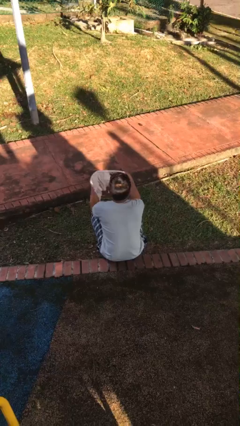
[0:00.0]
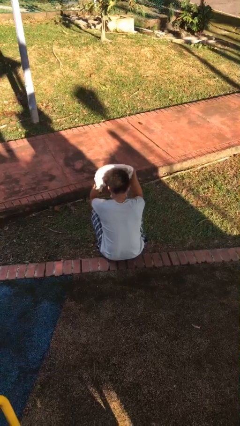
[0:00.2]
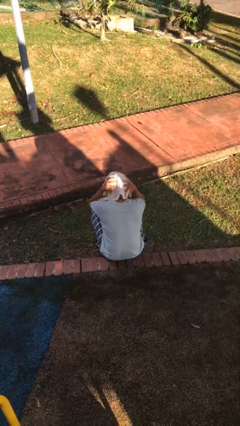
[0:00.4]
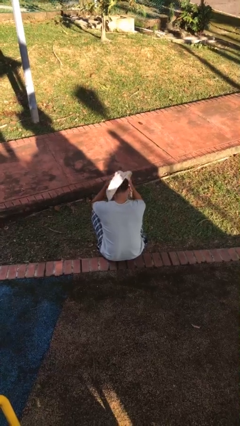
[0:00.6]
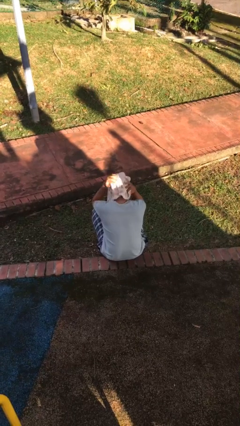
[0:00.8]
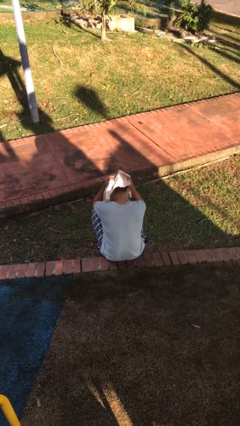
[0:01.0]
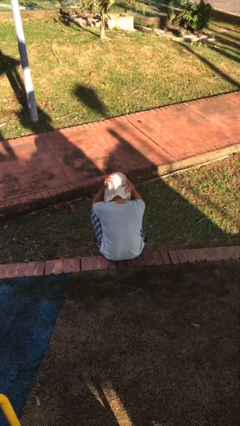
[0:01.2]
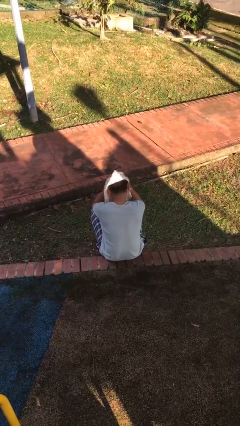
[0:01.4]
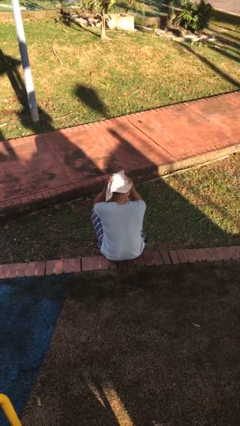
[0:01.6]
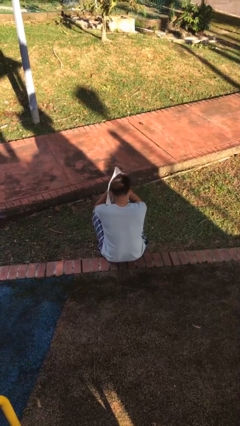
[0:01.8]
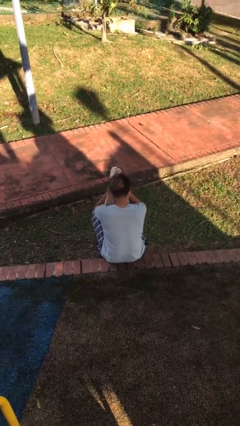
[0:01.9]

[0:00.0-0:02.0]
person dries hair with towel

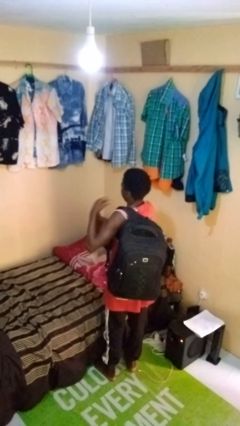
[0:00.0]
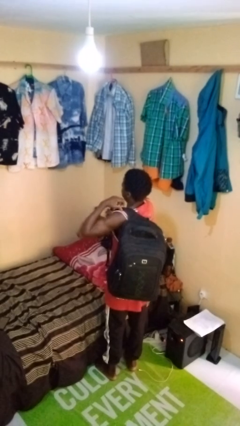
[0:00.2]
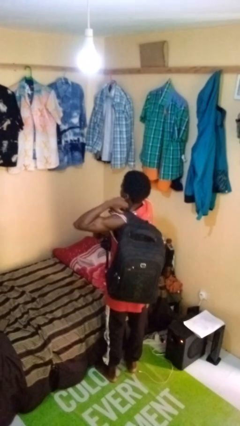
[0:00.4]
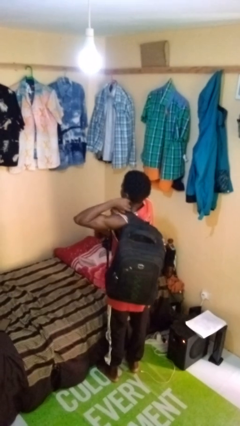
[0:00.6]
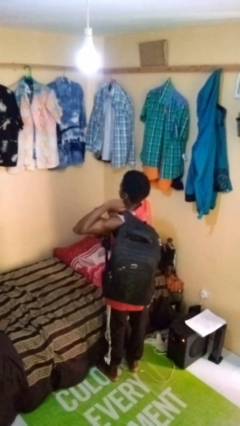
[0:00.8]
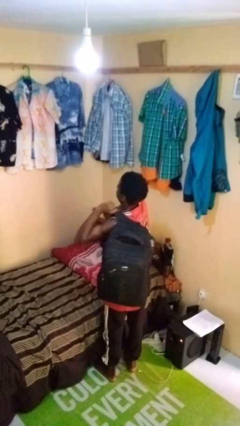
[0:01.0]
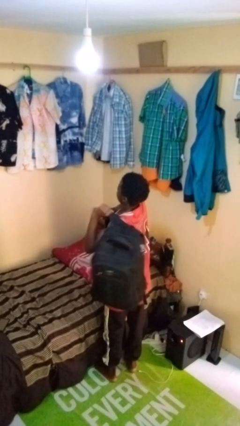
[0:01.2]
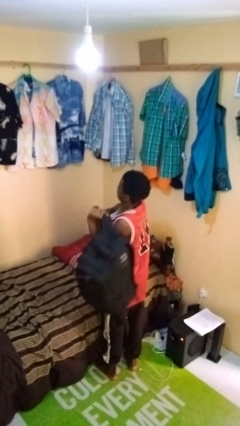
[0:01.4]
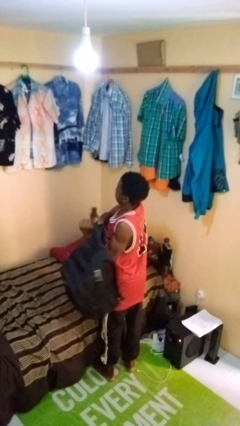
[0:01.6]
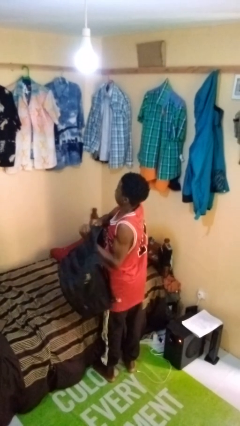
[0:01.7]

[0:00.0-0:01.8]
person takes off backpack

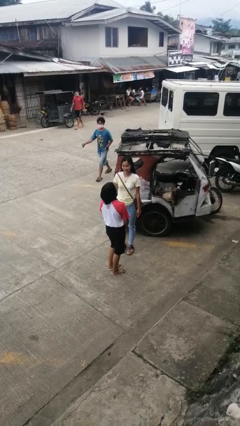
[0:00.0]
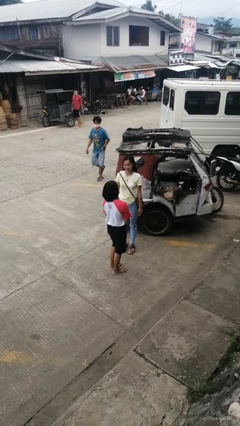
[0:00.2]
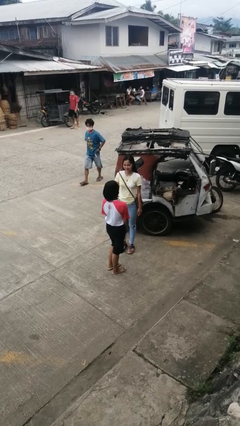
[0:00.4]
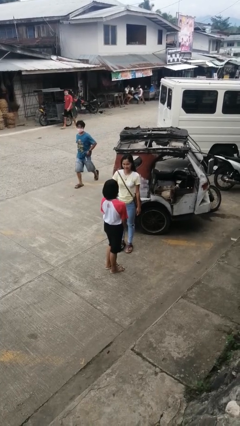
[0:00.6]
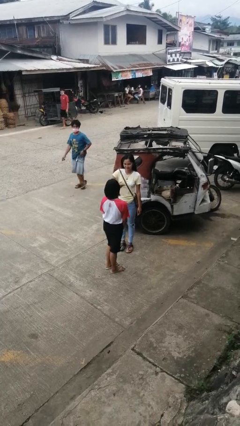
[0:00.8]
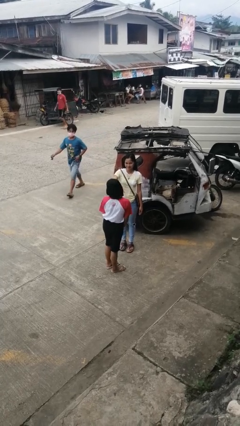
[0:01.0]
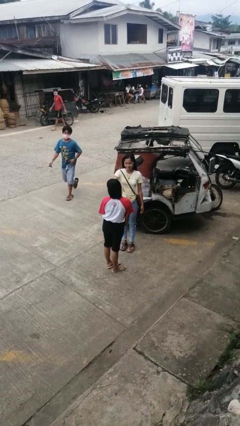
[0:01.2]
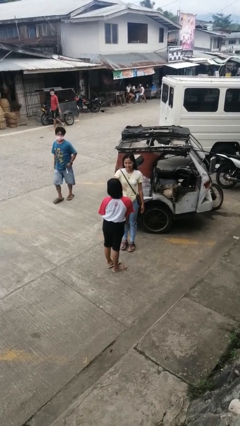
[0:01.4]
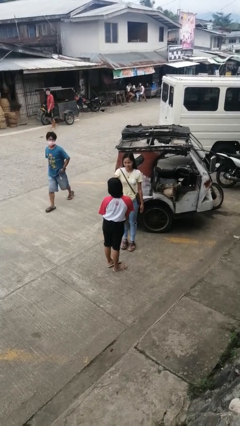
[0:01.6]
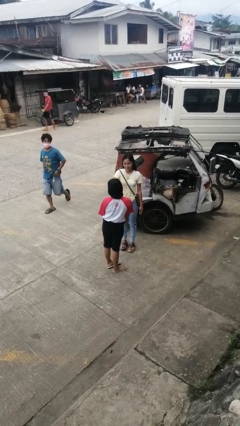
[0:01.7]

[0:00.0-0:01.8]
person shoves person

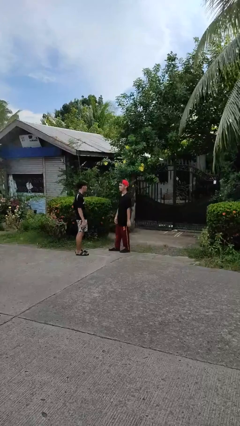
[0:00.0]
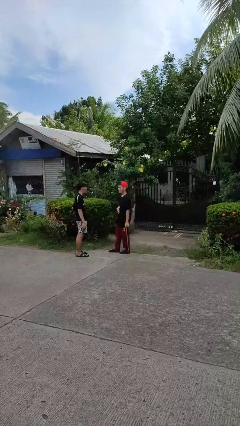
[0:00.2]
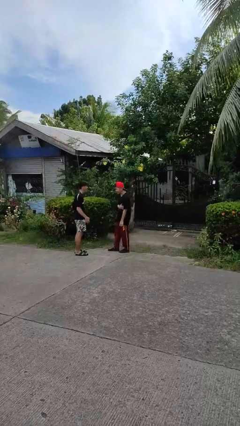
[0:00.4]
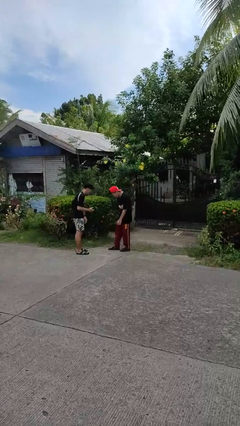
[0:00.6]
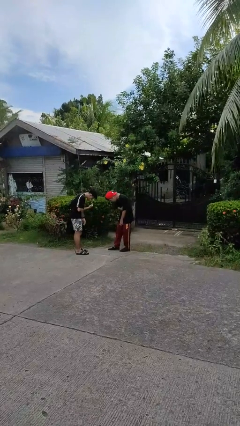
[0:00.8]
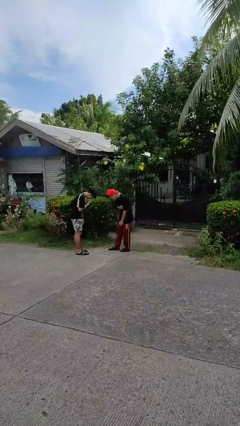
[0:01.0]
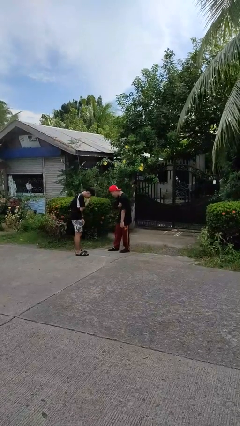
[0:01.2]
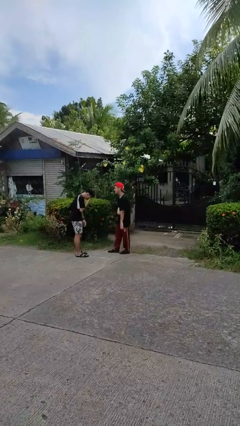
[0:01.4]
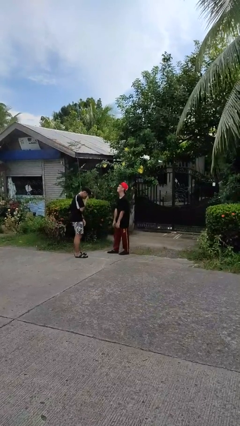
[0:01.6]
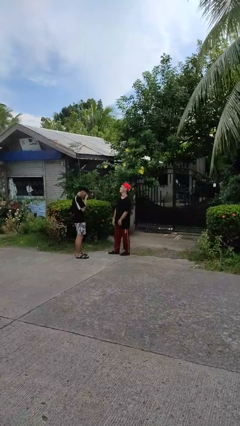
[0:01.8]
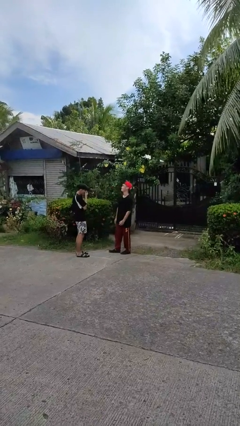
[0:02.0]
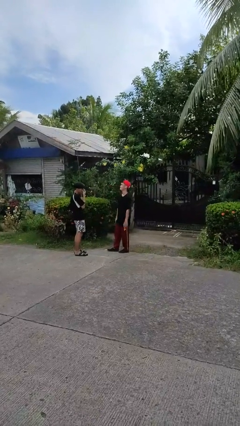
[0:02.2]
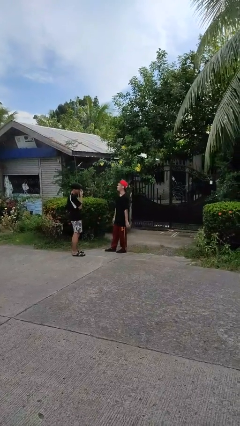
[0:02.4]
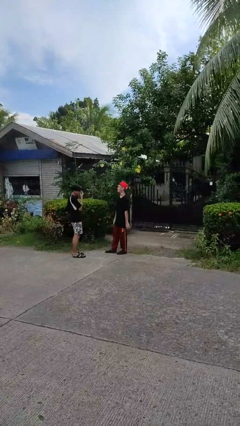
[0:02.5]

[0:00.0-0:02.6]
person laughs with person

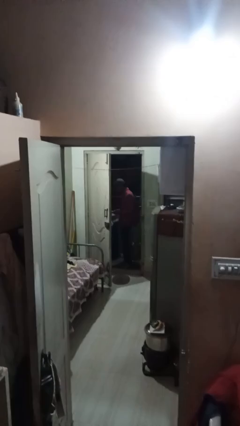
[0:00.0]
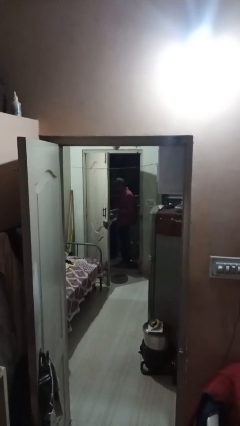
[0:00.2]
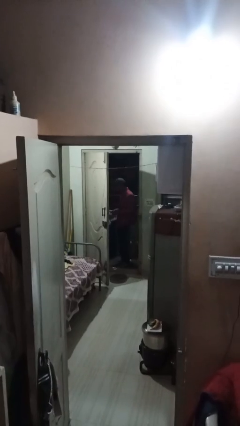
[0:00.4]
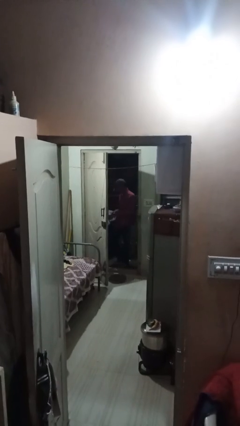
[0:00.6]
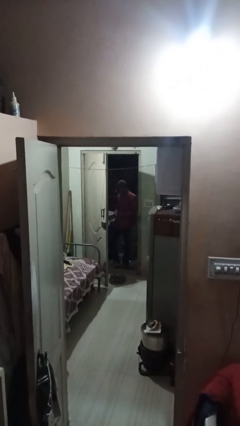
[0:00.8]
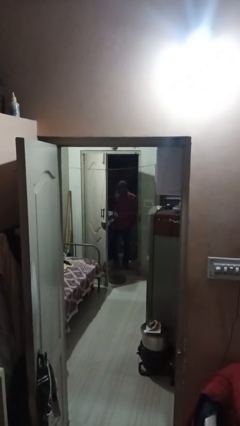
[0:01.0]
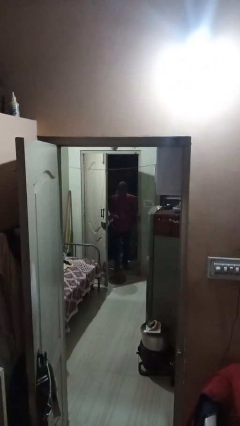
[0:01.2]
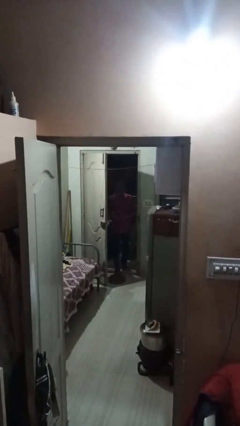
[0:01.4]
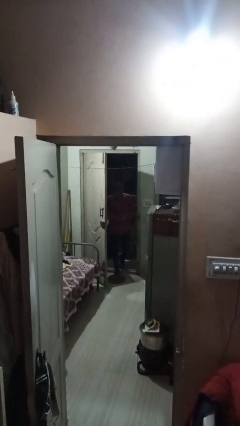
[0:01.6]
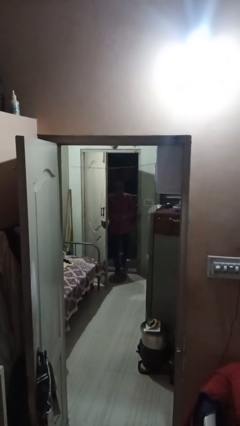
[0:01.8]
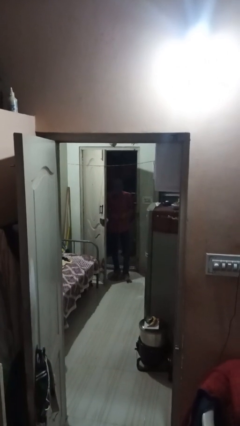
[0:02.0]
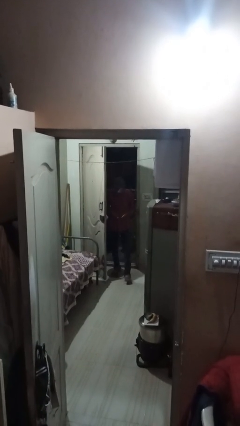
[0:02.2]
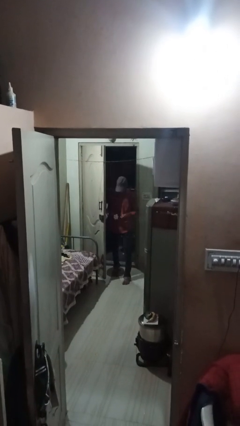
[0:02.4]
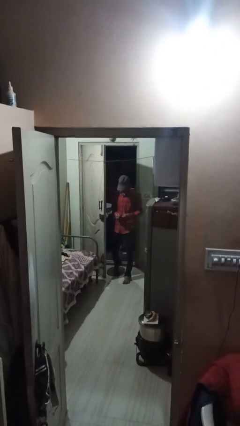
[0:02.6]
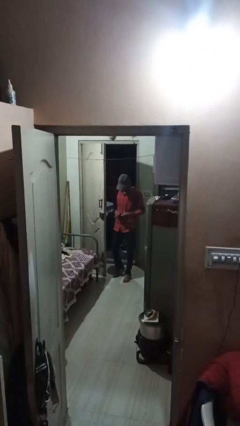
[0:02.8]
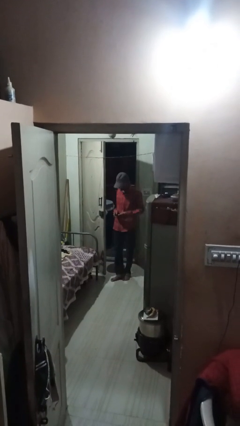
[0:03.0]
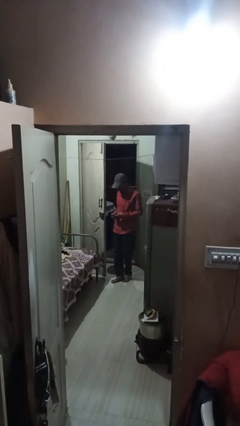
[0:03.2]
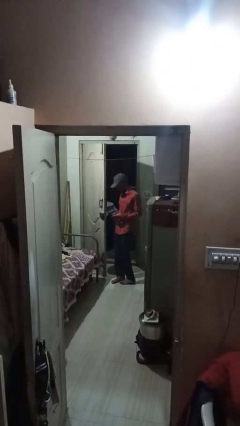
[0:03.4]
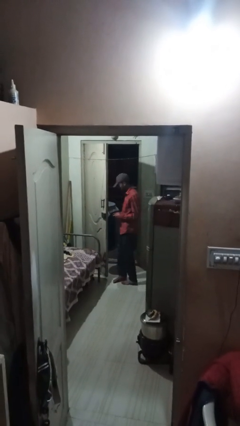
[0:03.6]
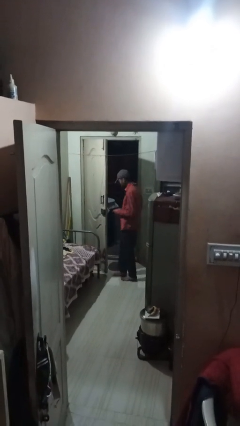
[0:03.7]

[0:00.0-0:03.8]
person enters scene through structure

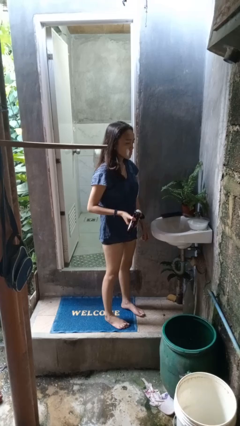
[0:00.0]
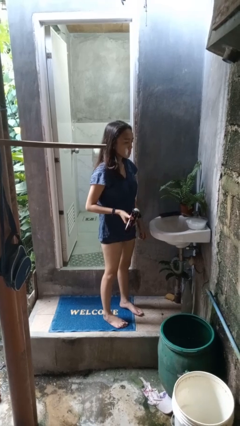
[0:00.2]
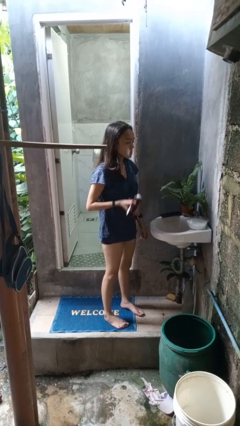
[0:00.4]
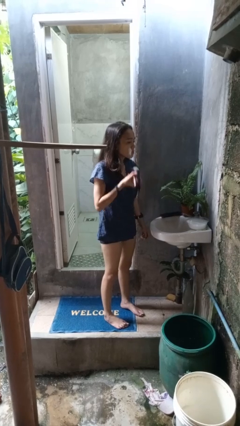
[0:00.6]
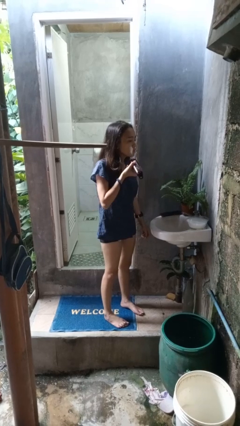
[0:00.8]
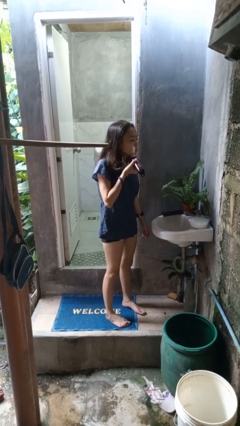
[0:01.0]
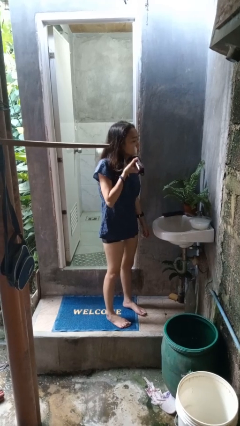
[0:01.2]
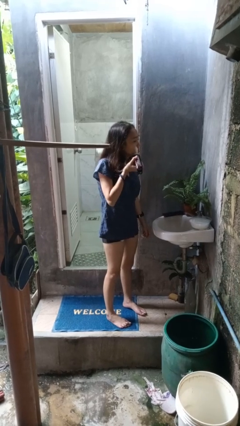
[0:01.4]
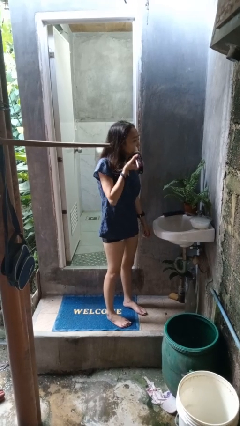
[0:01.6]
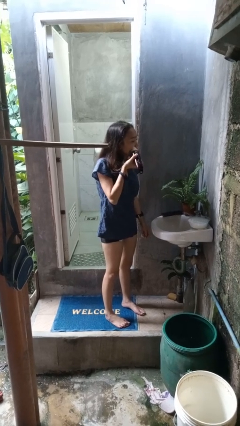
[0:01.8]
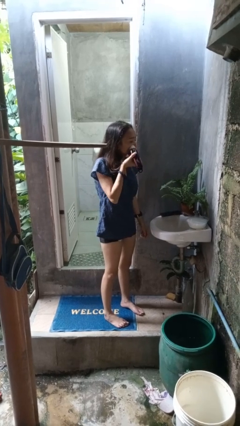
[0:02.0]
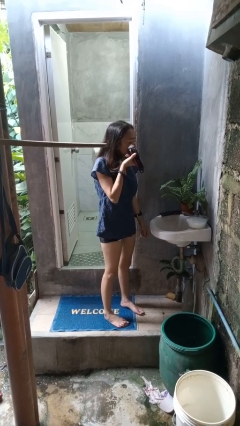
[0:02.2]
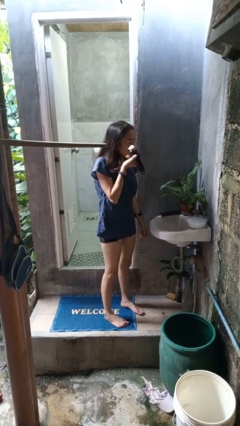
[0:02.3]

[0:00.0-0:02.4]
person shaves face

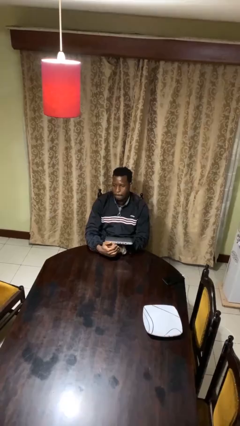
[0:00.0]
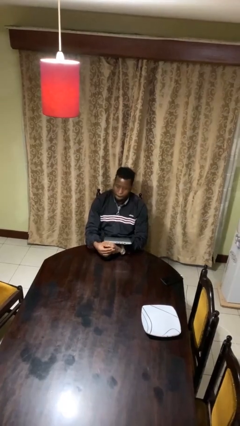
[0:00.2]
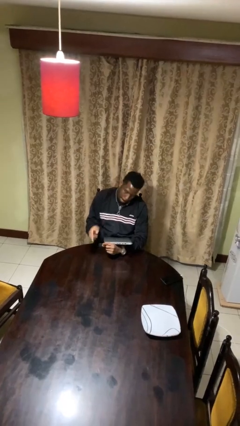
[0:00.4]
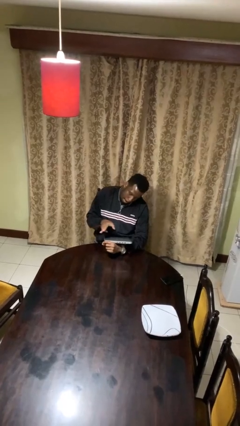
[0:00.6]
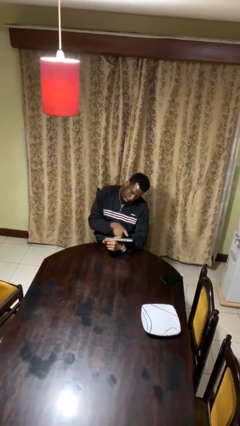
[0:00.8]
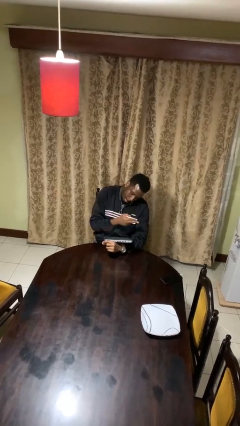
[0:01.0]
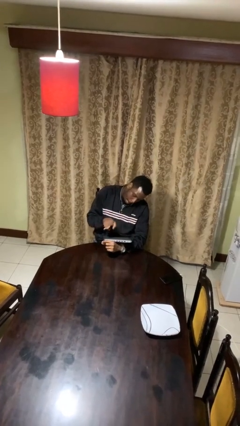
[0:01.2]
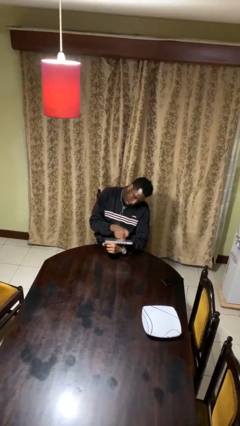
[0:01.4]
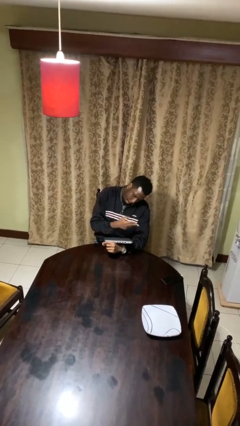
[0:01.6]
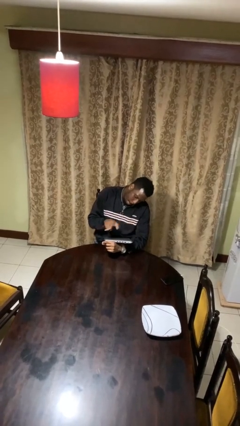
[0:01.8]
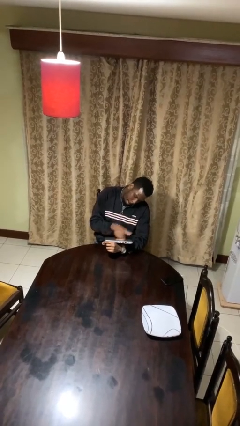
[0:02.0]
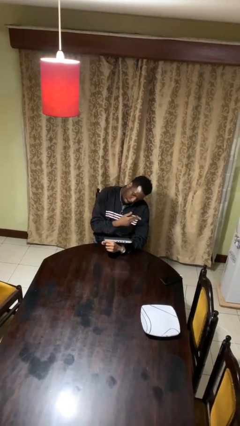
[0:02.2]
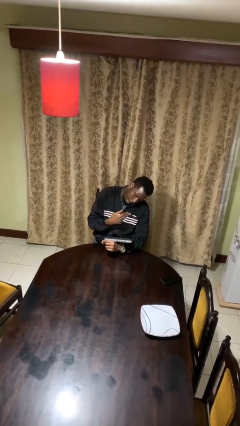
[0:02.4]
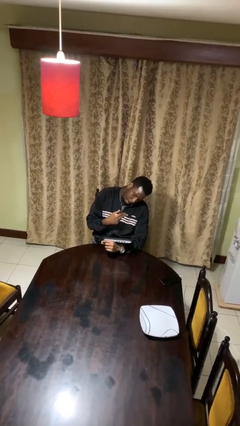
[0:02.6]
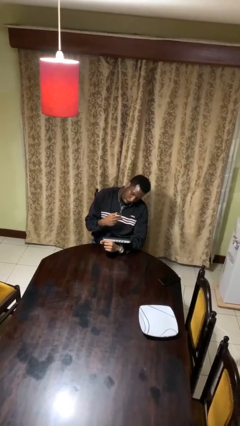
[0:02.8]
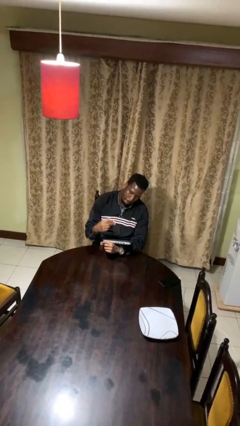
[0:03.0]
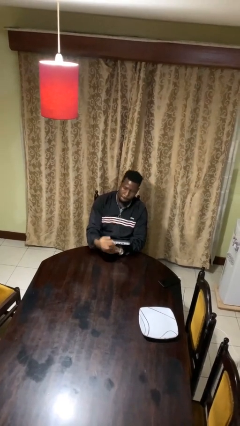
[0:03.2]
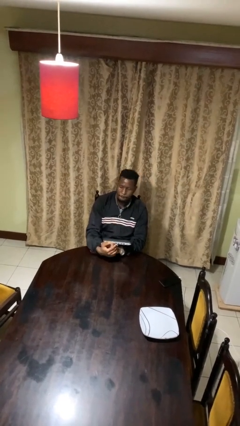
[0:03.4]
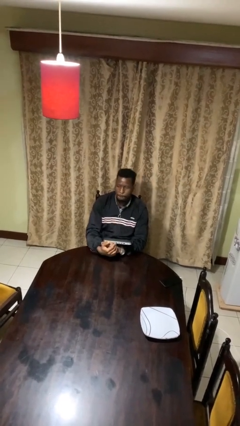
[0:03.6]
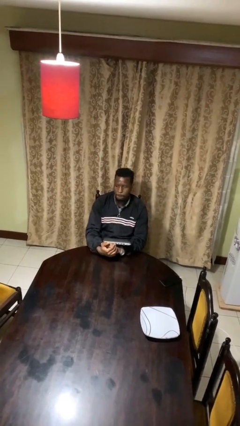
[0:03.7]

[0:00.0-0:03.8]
person interacts with tablet
